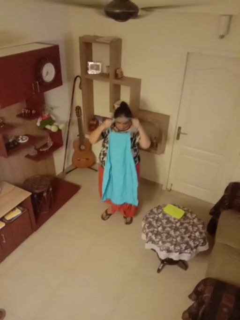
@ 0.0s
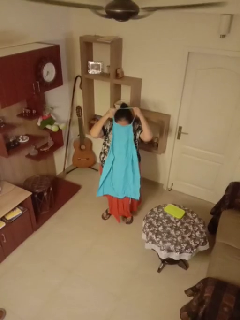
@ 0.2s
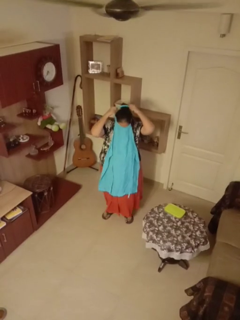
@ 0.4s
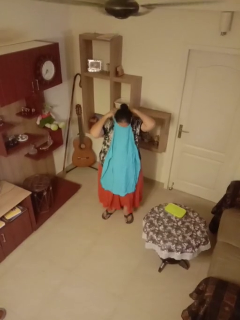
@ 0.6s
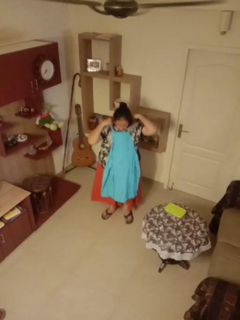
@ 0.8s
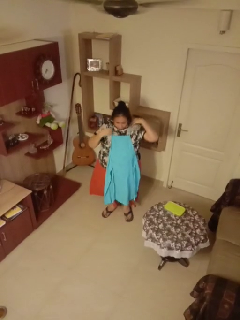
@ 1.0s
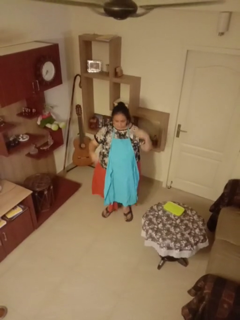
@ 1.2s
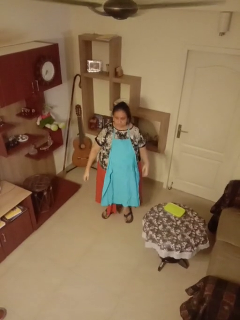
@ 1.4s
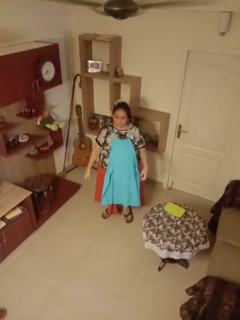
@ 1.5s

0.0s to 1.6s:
person puts on apron

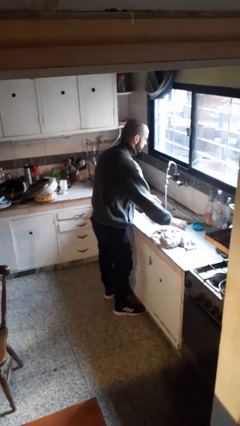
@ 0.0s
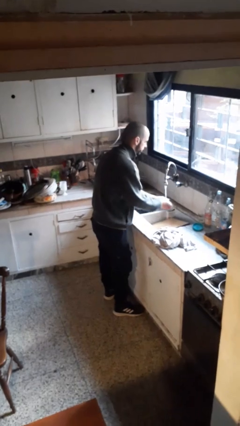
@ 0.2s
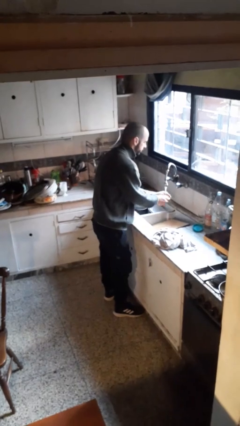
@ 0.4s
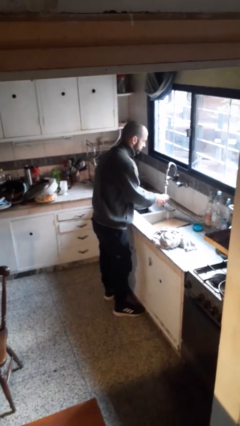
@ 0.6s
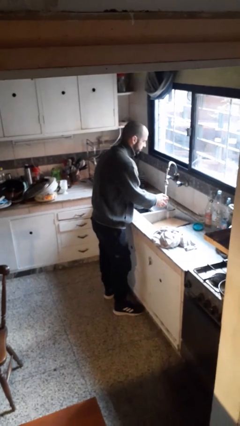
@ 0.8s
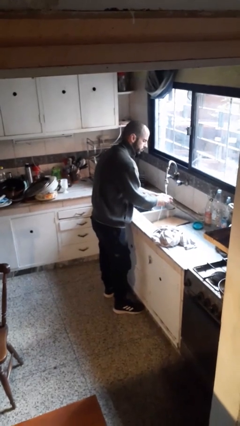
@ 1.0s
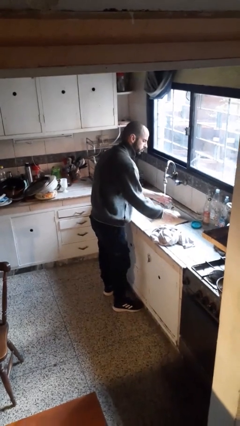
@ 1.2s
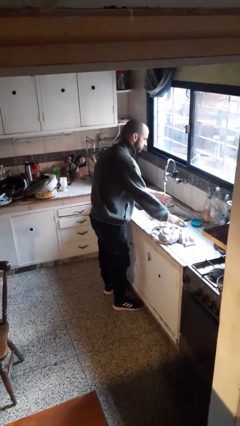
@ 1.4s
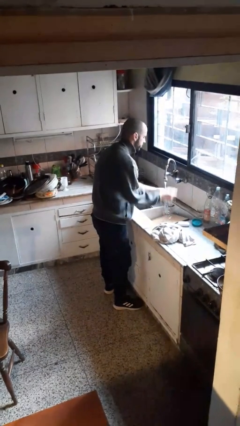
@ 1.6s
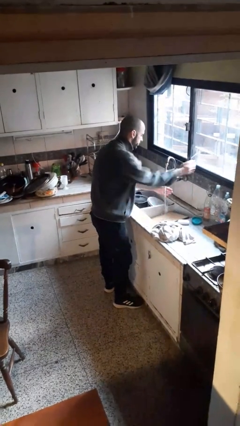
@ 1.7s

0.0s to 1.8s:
person washes hands

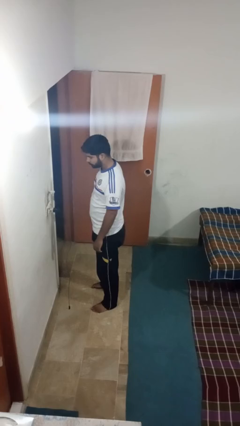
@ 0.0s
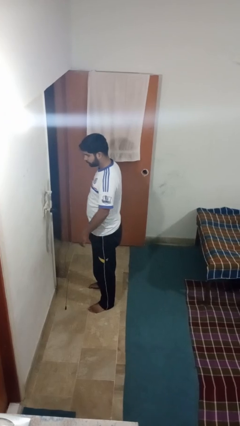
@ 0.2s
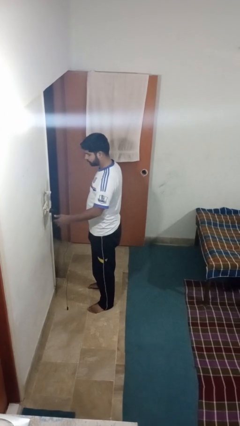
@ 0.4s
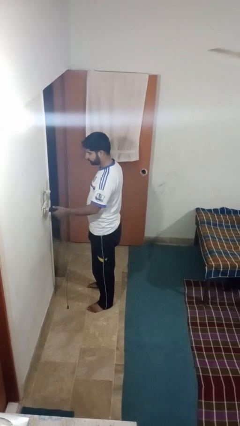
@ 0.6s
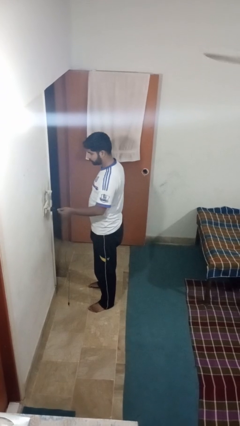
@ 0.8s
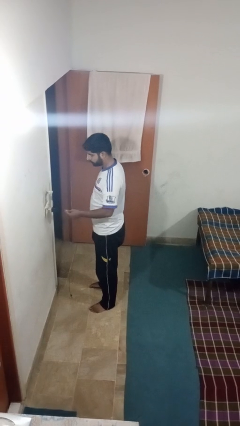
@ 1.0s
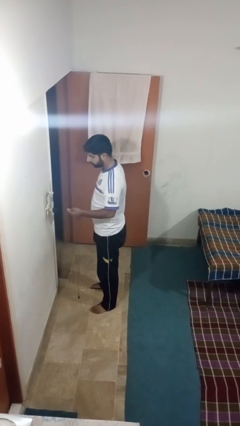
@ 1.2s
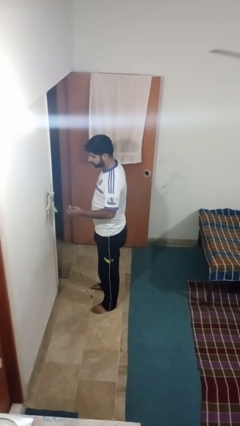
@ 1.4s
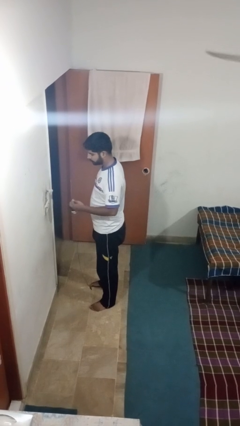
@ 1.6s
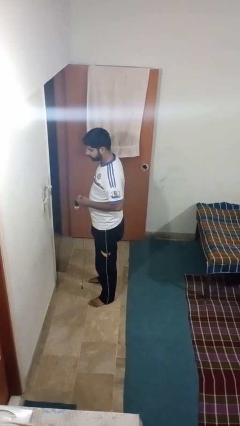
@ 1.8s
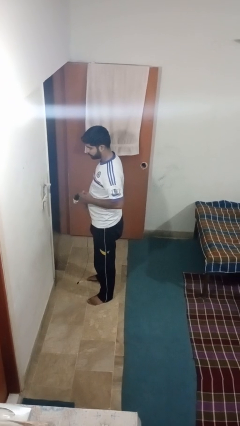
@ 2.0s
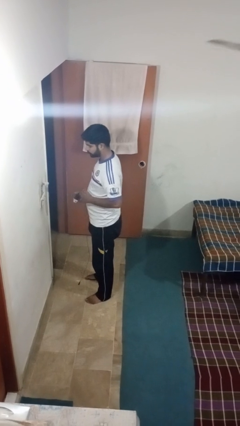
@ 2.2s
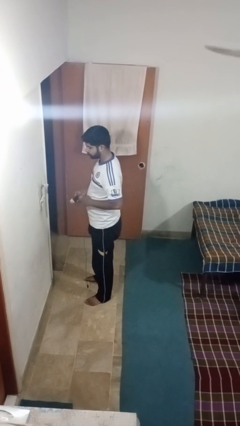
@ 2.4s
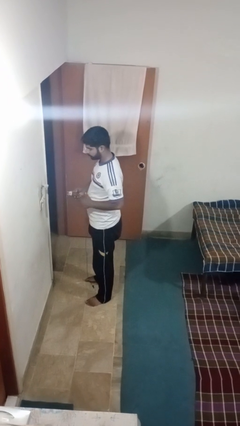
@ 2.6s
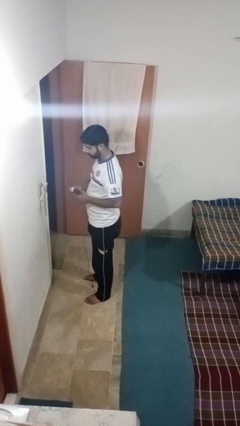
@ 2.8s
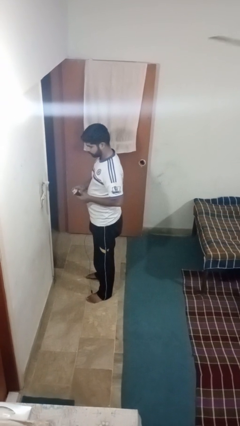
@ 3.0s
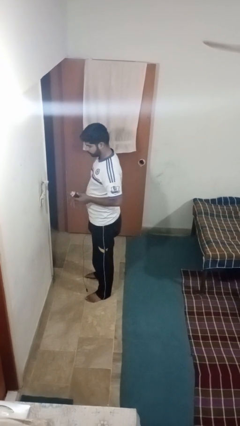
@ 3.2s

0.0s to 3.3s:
person unplugs from electrical socket

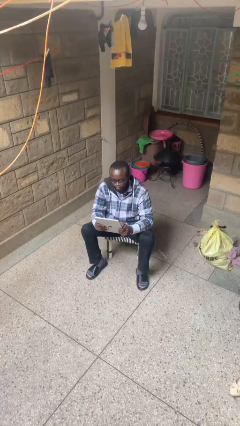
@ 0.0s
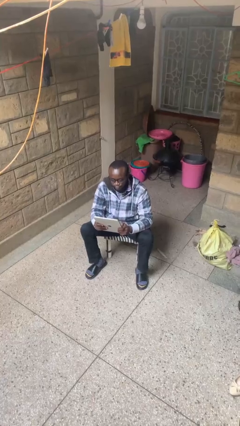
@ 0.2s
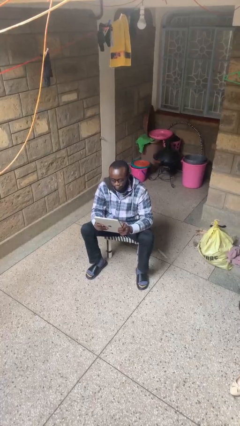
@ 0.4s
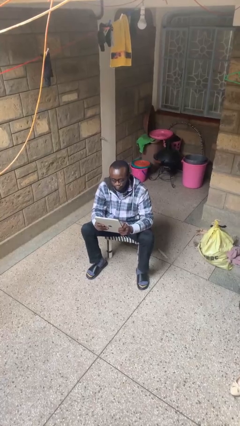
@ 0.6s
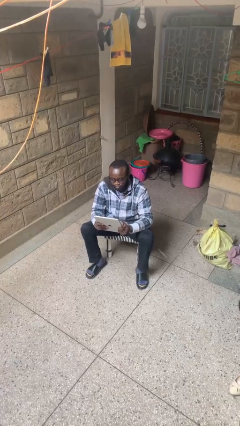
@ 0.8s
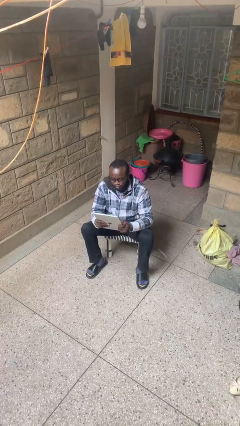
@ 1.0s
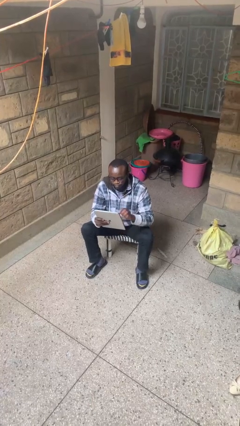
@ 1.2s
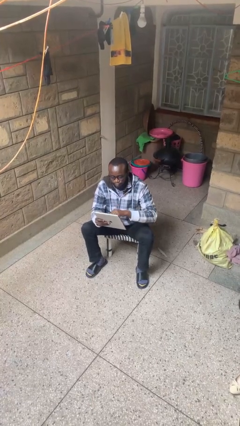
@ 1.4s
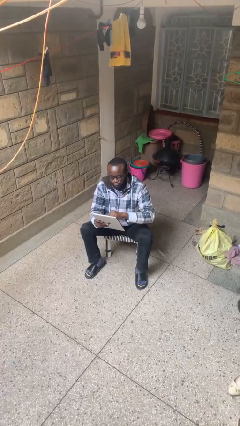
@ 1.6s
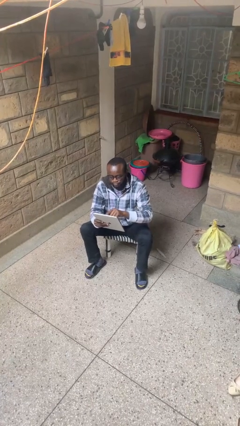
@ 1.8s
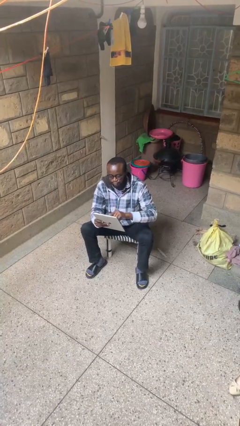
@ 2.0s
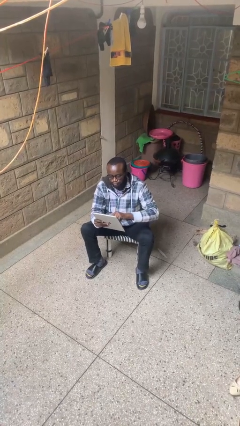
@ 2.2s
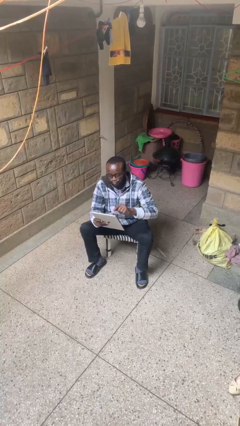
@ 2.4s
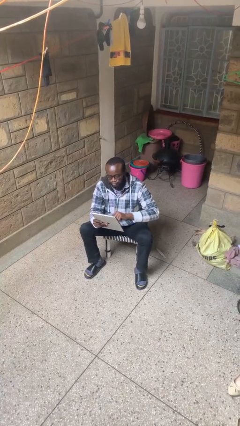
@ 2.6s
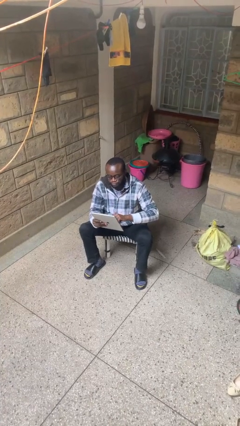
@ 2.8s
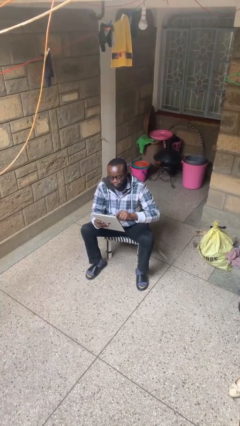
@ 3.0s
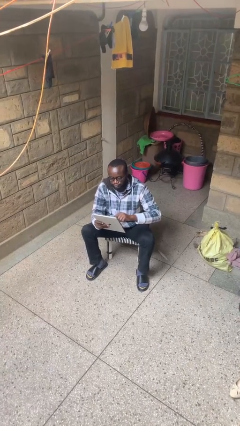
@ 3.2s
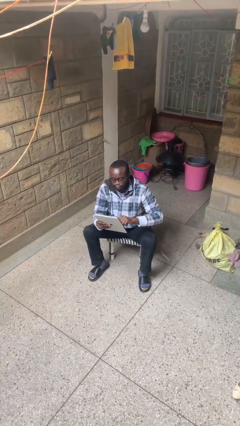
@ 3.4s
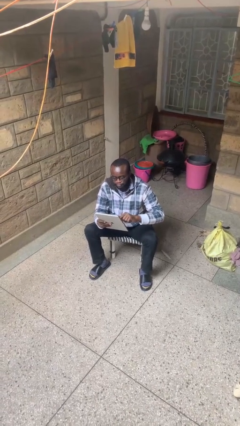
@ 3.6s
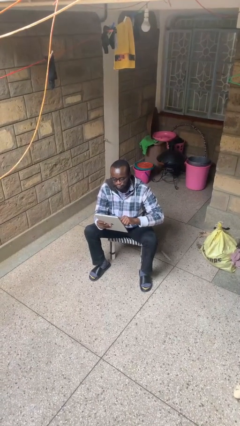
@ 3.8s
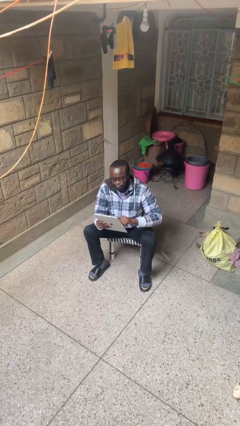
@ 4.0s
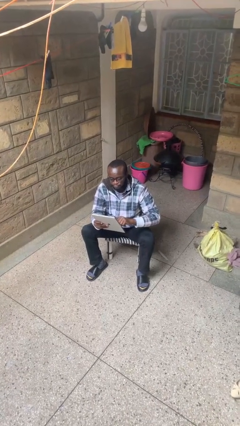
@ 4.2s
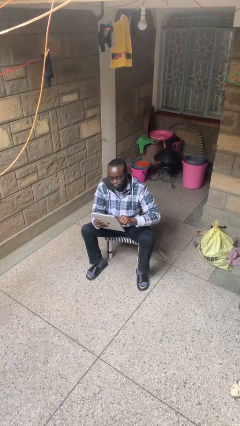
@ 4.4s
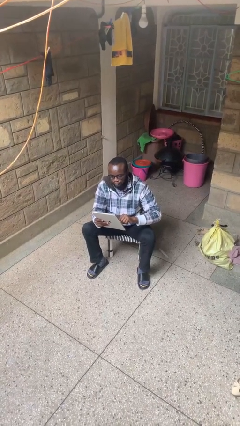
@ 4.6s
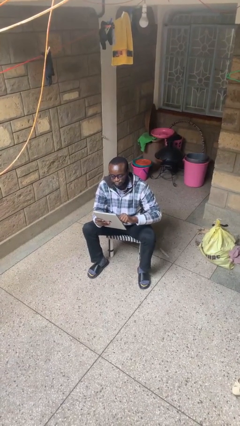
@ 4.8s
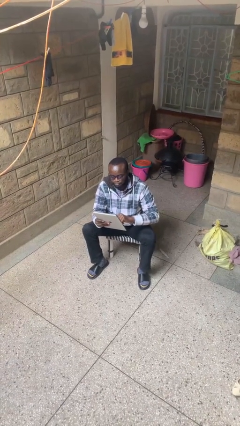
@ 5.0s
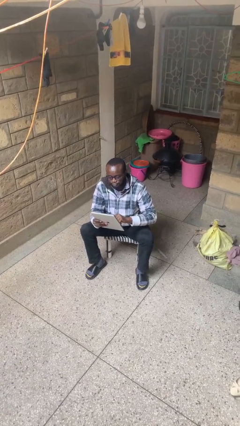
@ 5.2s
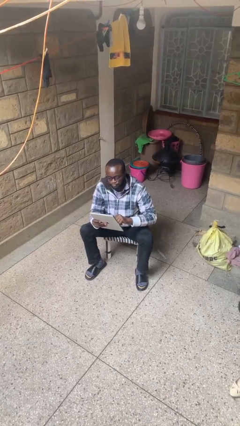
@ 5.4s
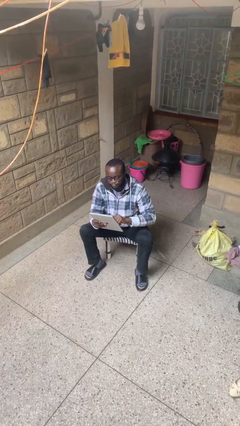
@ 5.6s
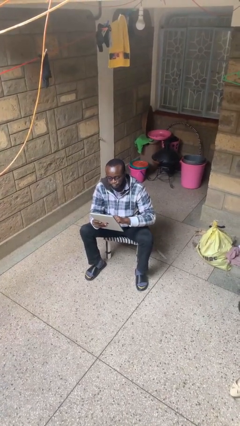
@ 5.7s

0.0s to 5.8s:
person interacts with tablet

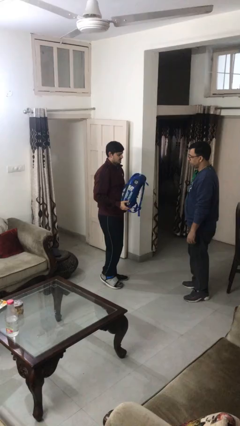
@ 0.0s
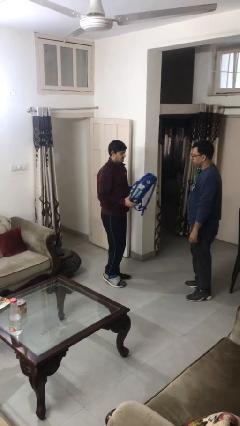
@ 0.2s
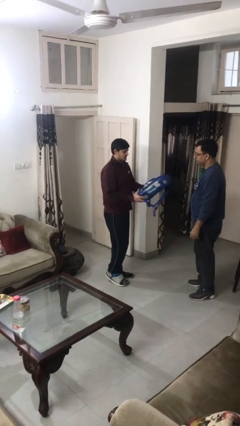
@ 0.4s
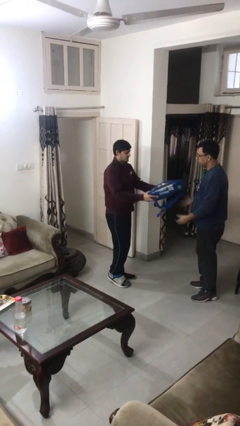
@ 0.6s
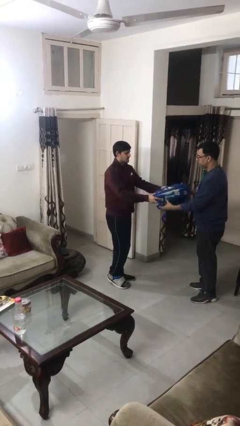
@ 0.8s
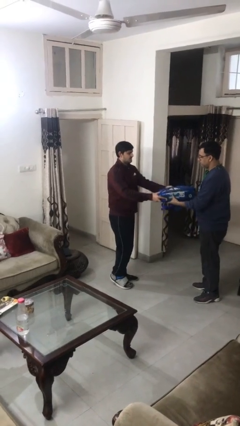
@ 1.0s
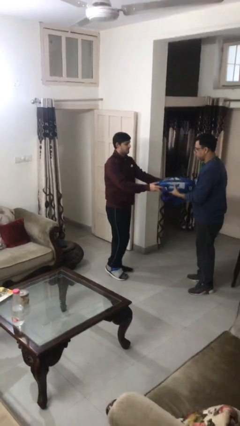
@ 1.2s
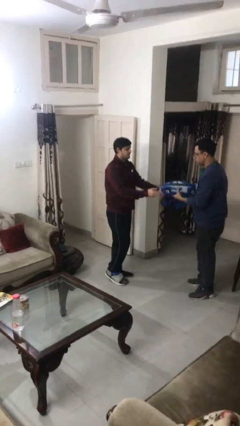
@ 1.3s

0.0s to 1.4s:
person transfers object to person

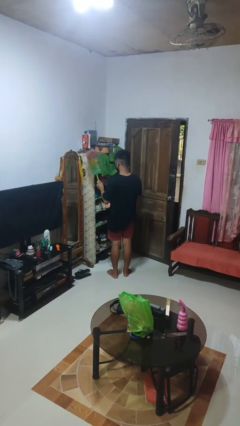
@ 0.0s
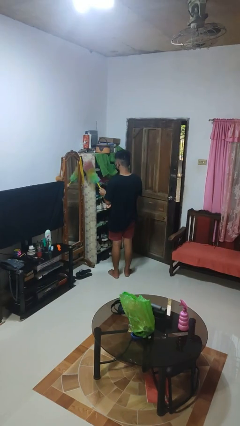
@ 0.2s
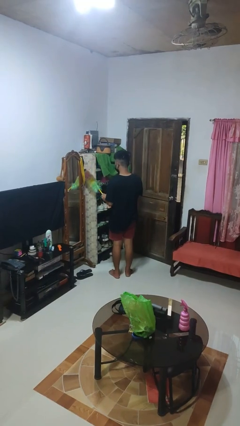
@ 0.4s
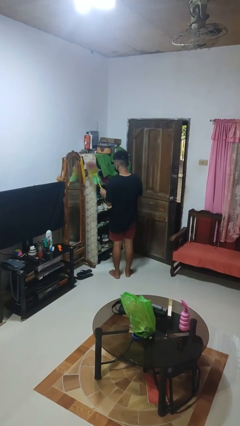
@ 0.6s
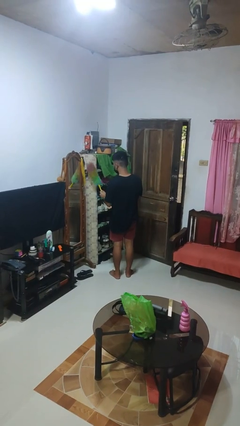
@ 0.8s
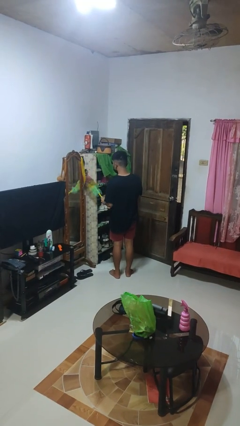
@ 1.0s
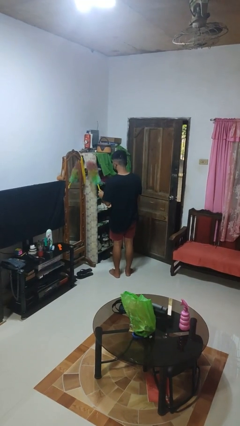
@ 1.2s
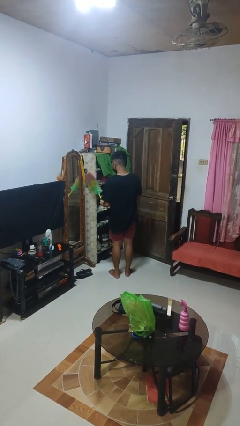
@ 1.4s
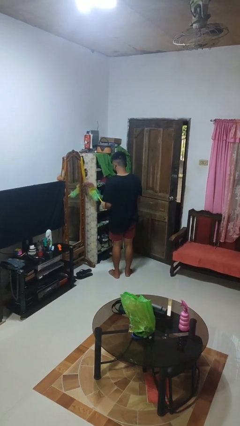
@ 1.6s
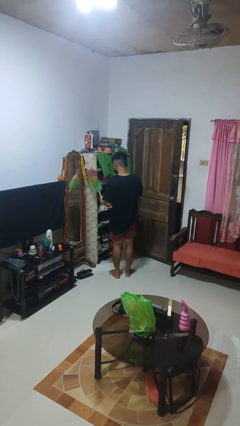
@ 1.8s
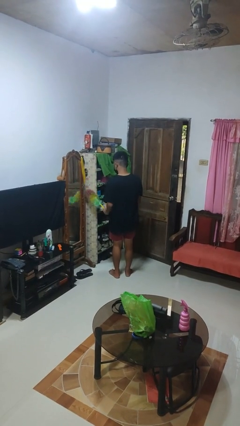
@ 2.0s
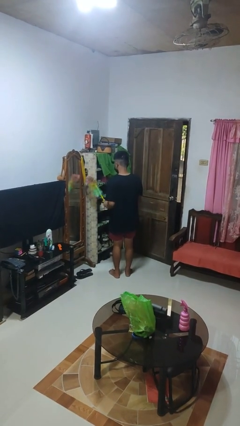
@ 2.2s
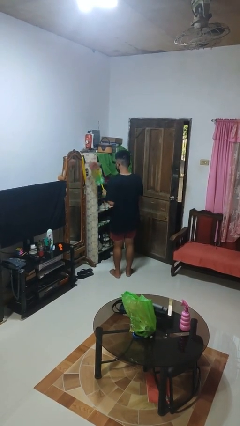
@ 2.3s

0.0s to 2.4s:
person dusts furniture

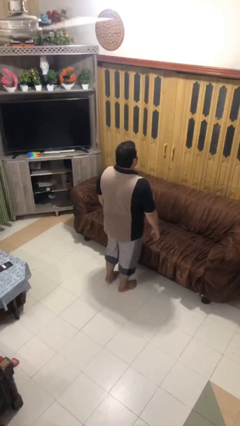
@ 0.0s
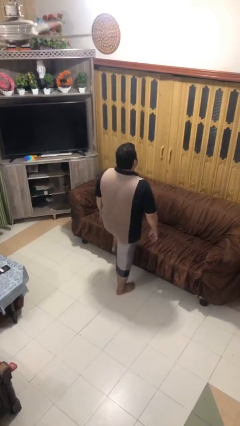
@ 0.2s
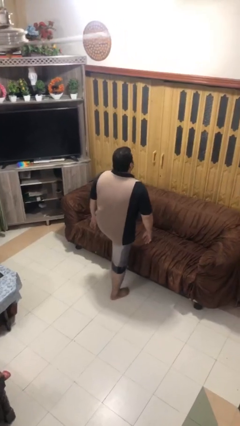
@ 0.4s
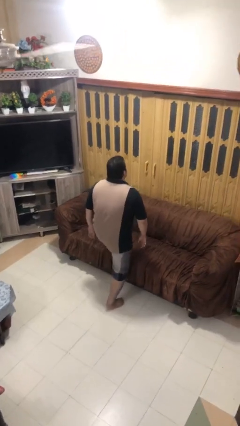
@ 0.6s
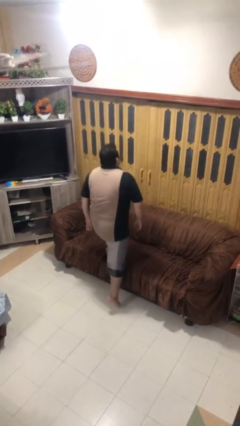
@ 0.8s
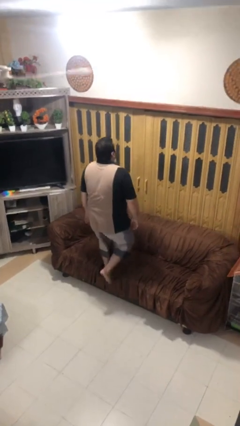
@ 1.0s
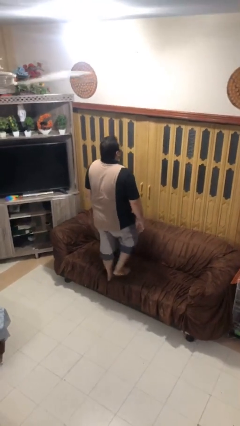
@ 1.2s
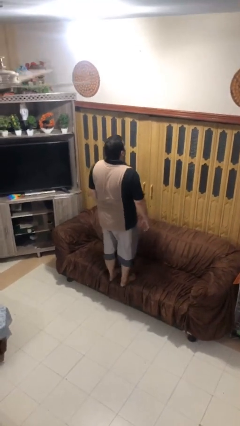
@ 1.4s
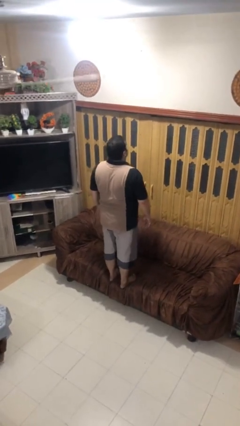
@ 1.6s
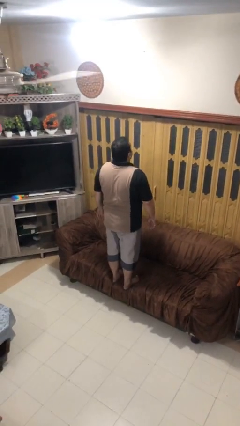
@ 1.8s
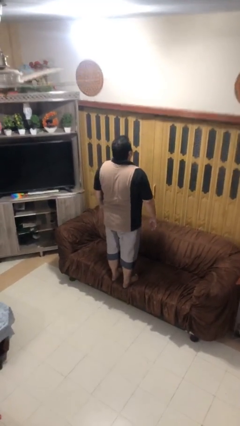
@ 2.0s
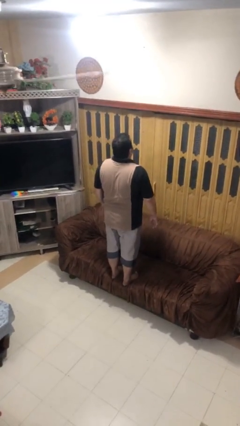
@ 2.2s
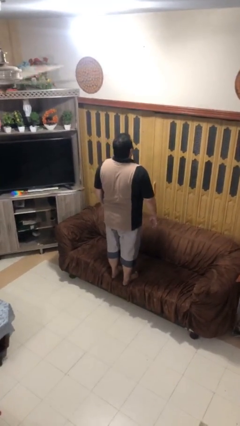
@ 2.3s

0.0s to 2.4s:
person climbs on couch
